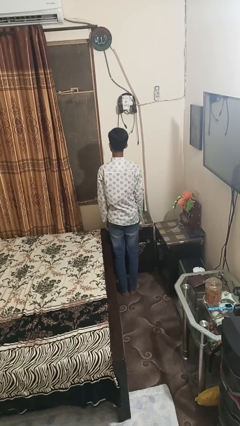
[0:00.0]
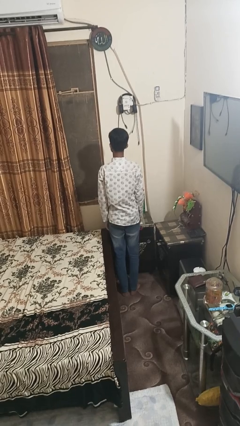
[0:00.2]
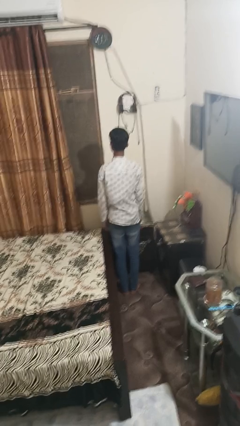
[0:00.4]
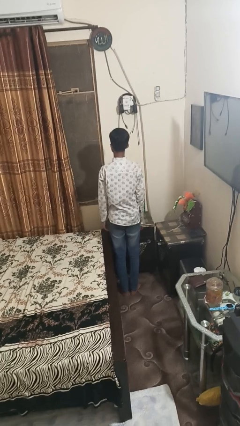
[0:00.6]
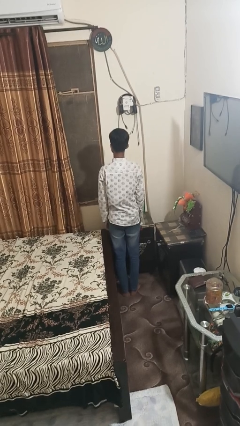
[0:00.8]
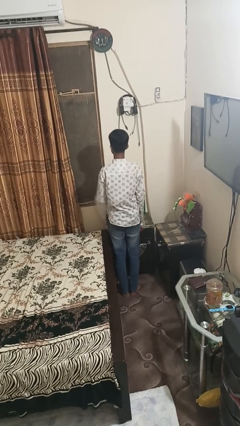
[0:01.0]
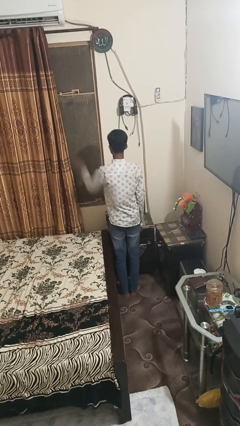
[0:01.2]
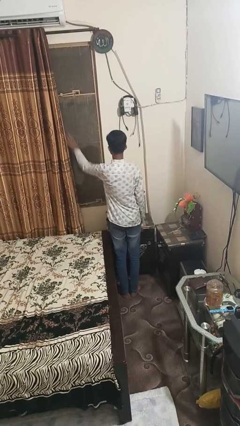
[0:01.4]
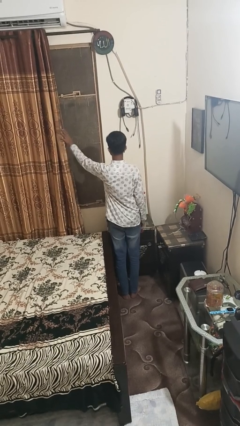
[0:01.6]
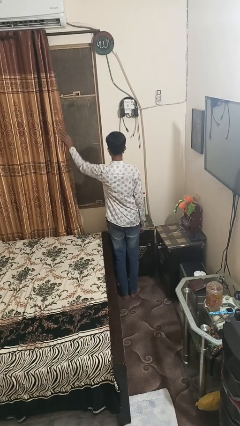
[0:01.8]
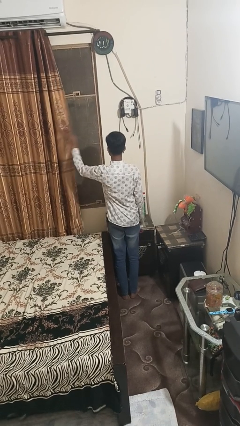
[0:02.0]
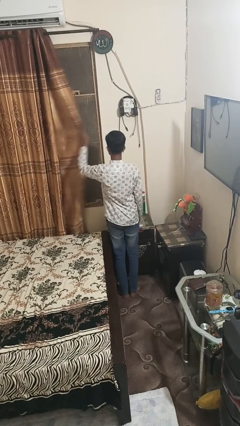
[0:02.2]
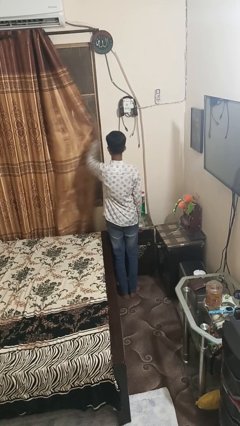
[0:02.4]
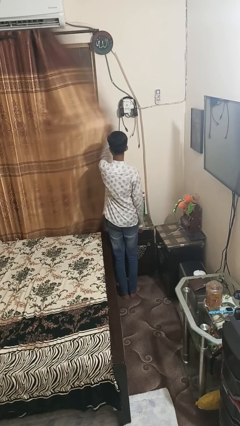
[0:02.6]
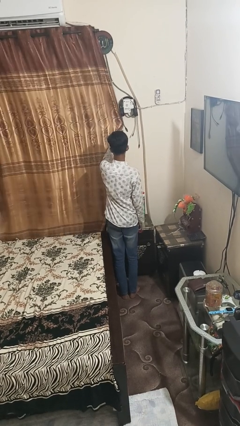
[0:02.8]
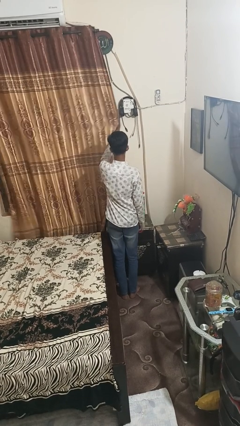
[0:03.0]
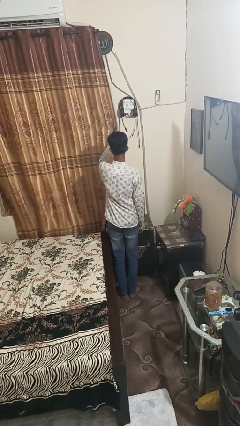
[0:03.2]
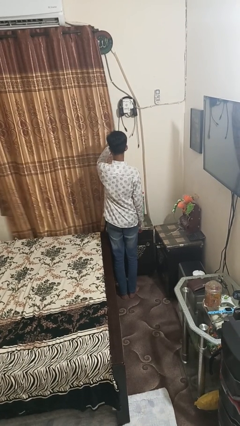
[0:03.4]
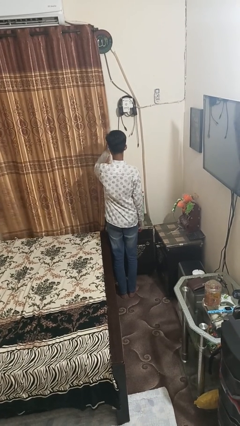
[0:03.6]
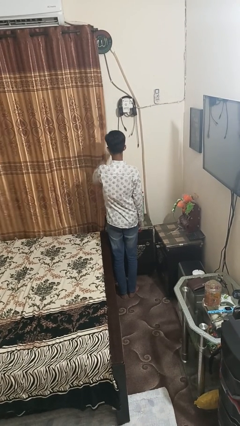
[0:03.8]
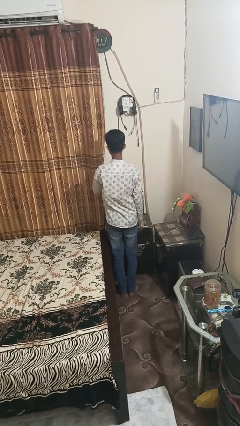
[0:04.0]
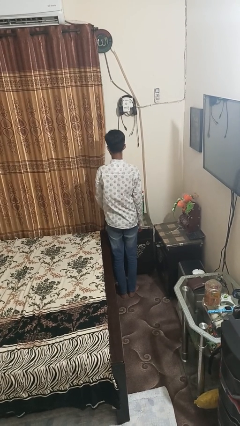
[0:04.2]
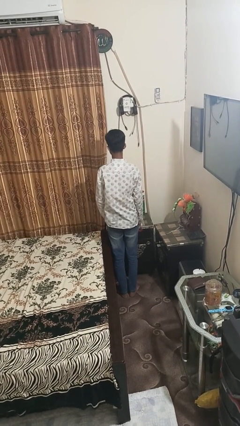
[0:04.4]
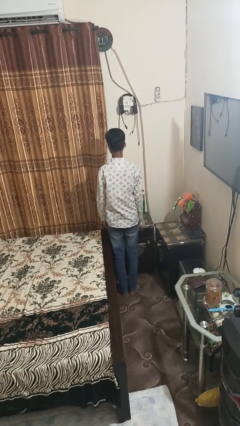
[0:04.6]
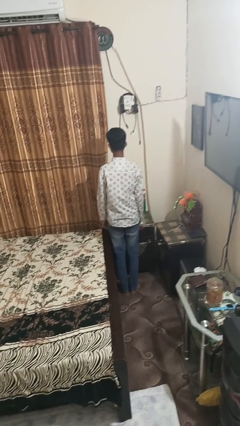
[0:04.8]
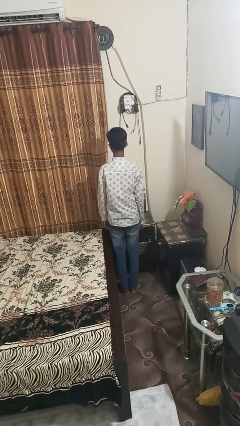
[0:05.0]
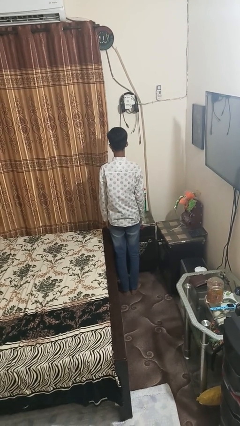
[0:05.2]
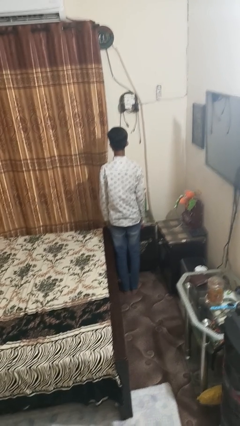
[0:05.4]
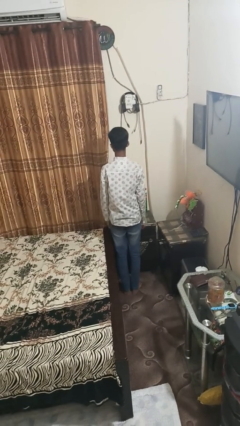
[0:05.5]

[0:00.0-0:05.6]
person closes curtains

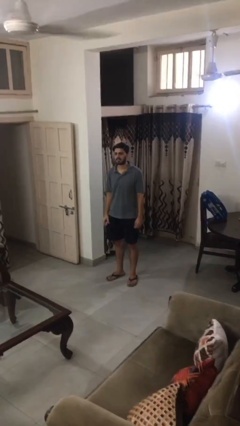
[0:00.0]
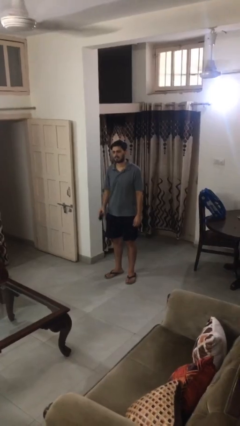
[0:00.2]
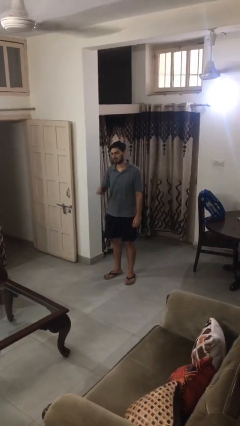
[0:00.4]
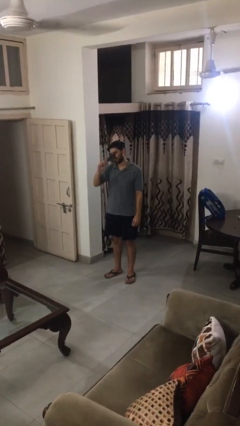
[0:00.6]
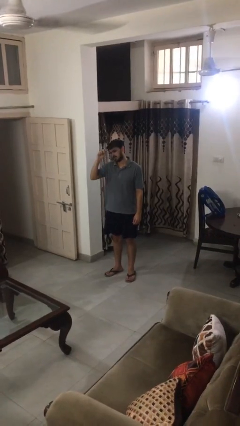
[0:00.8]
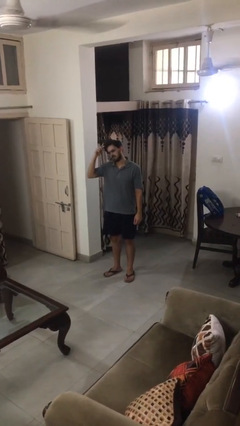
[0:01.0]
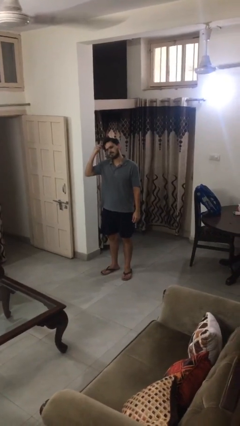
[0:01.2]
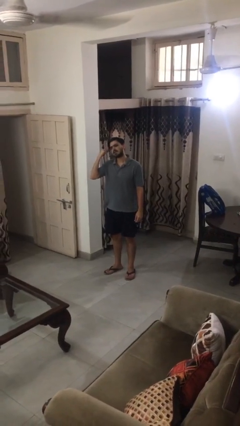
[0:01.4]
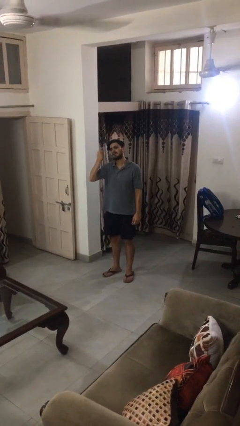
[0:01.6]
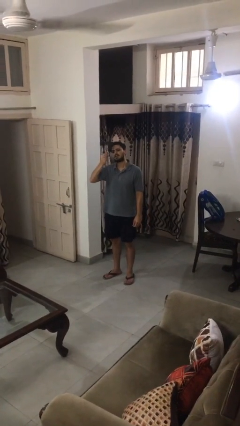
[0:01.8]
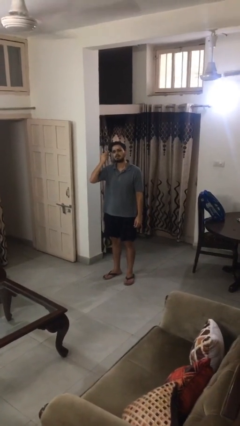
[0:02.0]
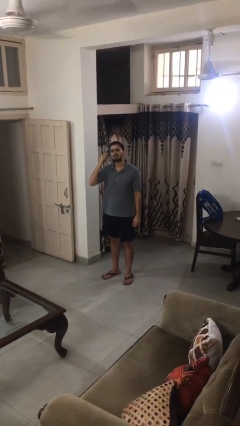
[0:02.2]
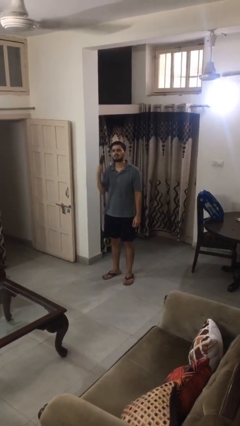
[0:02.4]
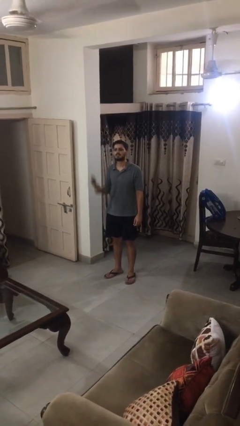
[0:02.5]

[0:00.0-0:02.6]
person brushes hair

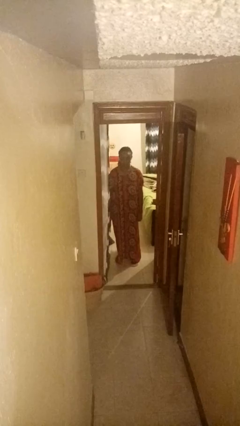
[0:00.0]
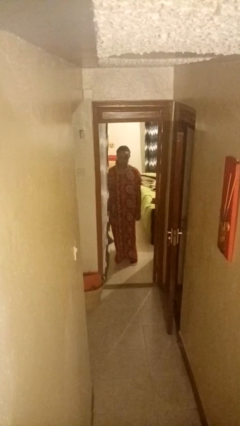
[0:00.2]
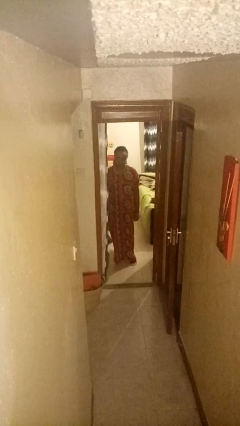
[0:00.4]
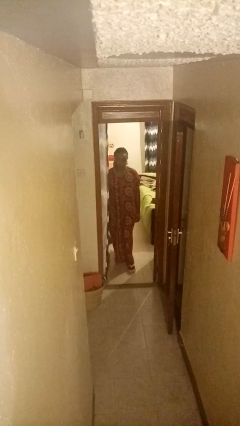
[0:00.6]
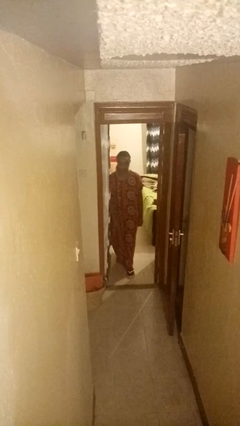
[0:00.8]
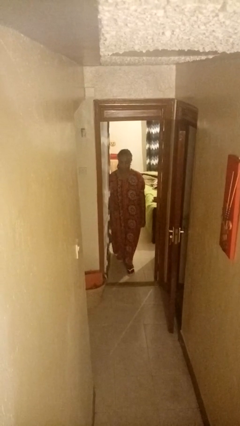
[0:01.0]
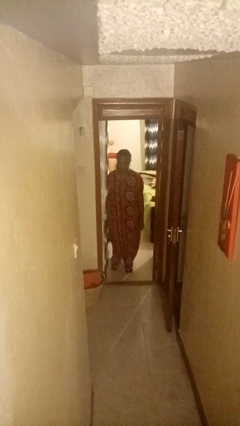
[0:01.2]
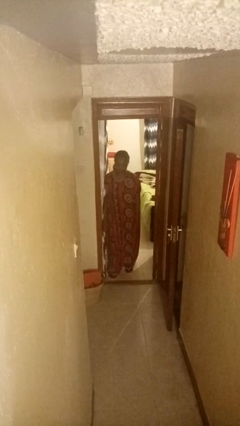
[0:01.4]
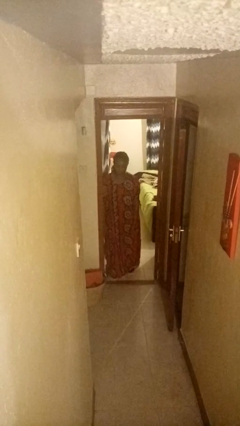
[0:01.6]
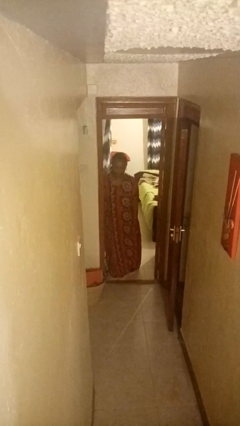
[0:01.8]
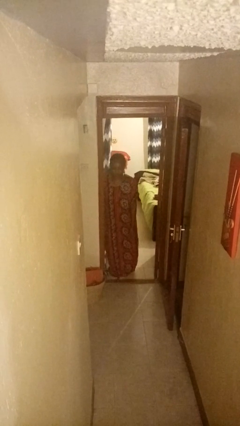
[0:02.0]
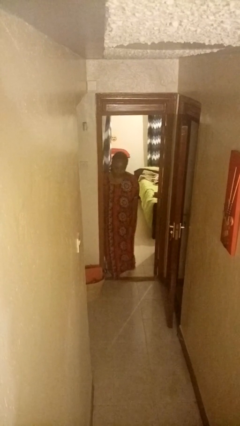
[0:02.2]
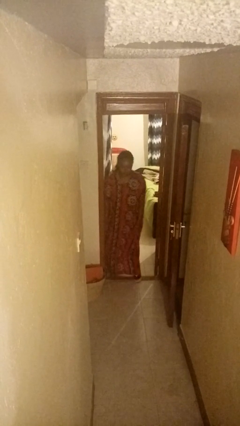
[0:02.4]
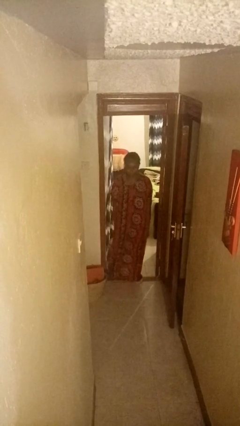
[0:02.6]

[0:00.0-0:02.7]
person bumps into wall

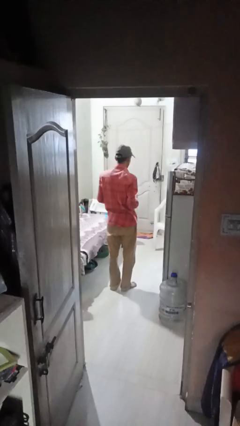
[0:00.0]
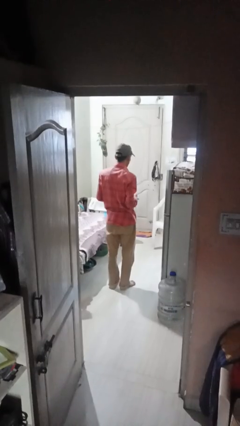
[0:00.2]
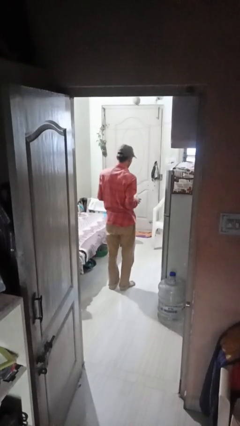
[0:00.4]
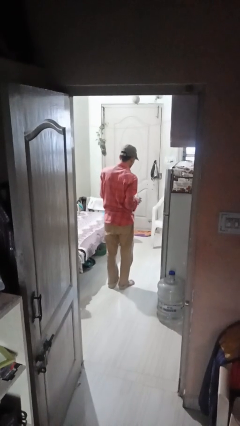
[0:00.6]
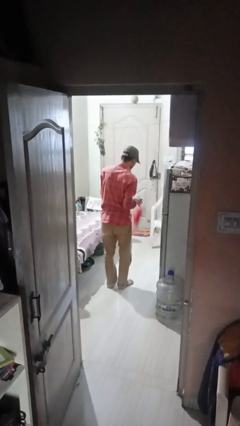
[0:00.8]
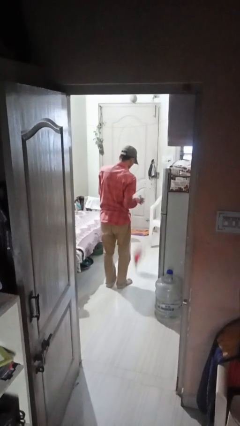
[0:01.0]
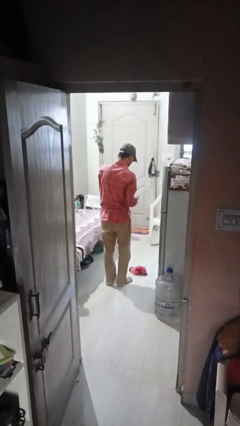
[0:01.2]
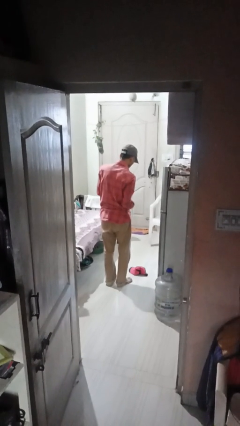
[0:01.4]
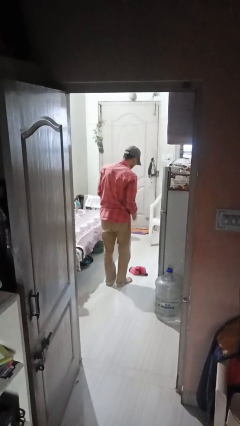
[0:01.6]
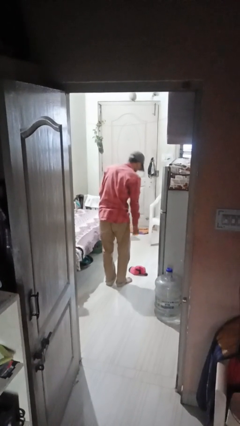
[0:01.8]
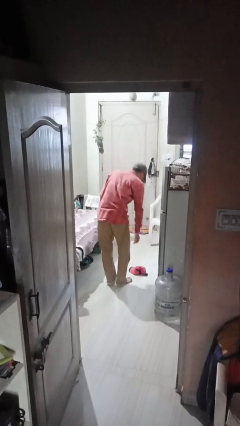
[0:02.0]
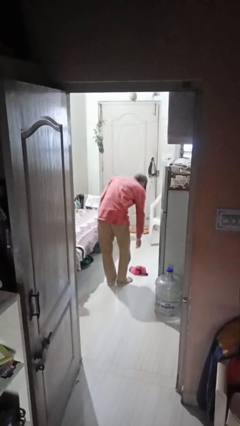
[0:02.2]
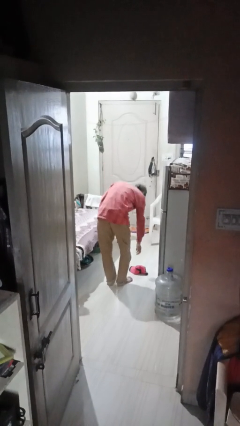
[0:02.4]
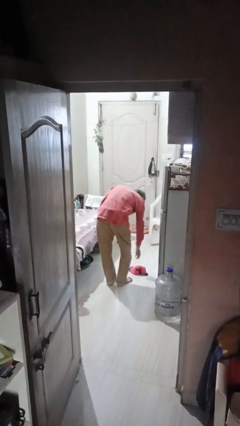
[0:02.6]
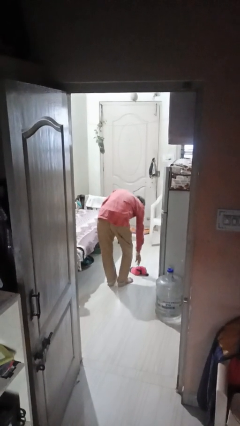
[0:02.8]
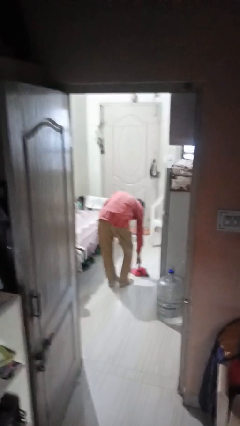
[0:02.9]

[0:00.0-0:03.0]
person drops object

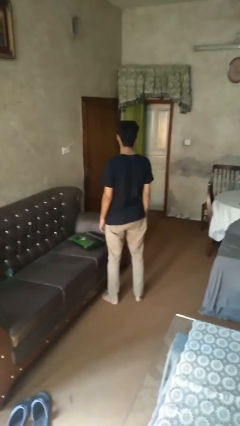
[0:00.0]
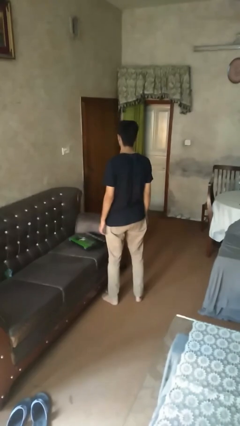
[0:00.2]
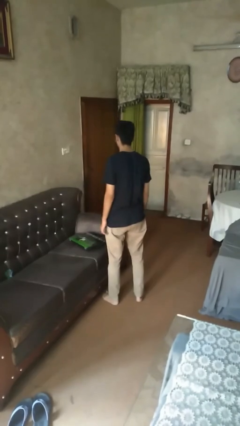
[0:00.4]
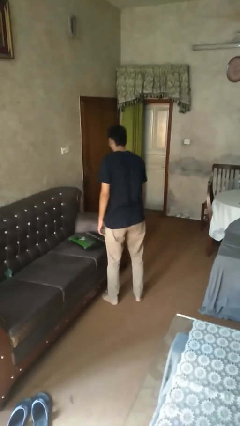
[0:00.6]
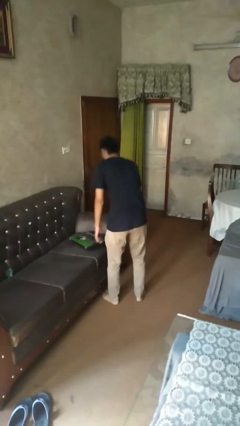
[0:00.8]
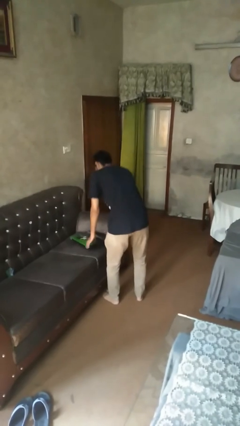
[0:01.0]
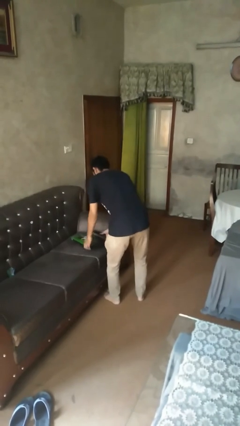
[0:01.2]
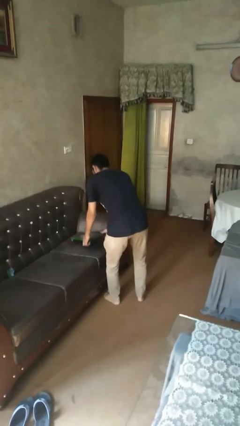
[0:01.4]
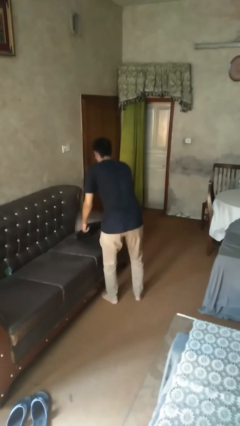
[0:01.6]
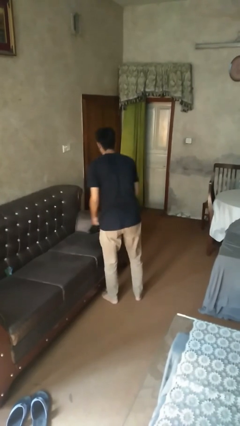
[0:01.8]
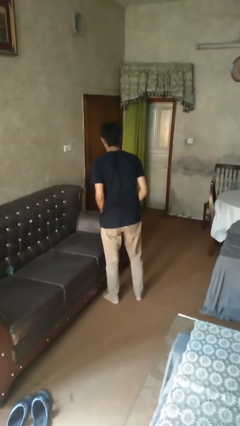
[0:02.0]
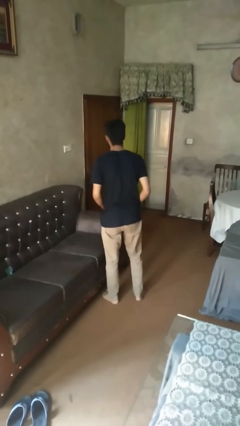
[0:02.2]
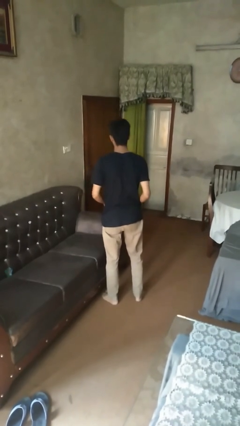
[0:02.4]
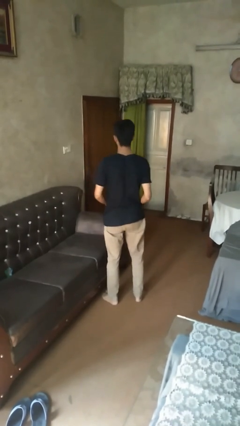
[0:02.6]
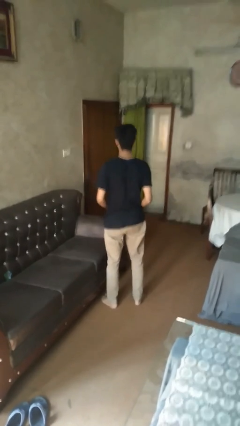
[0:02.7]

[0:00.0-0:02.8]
person picks up object from couch

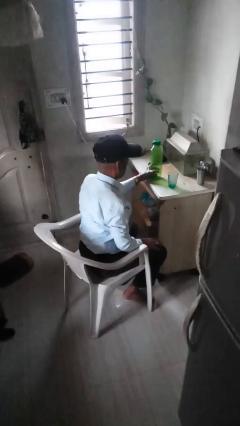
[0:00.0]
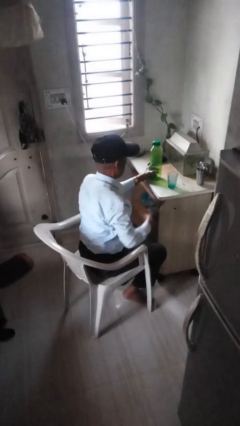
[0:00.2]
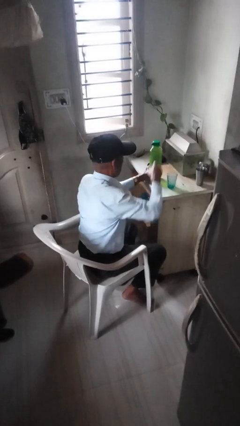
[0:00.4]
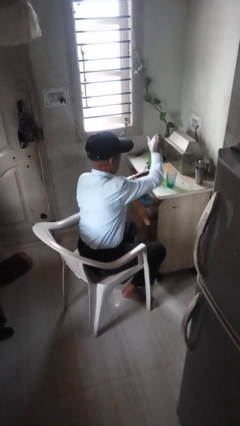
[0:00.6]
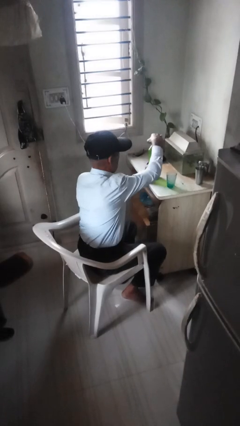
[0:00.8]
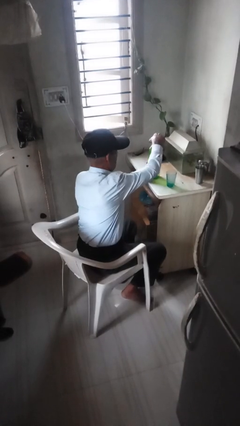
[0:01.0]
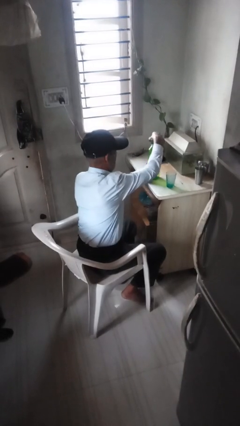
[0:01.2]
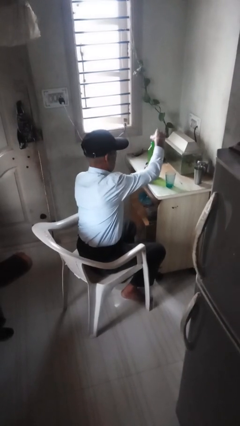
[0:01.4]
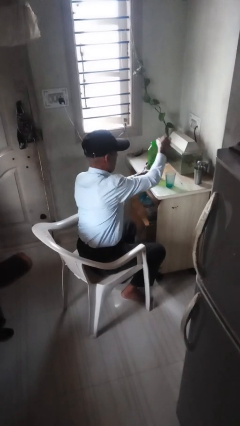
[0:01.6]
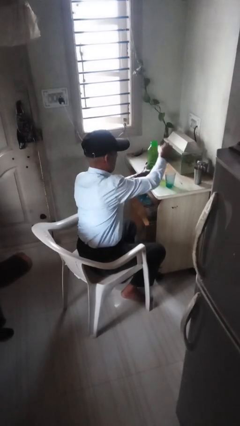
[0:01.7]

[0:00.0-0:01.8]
person unscrews lid from bottle
